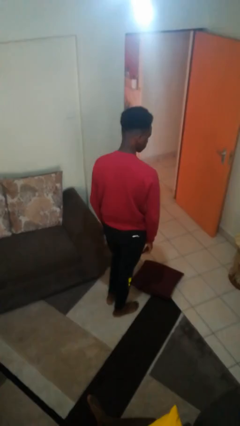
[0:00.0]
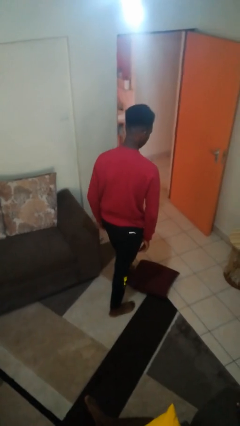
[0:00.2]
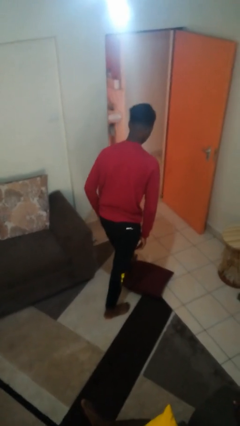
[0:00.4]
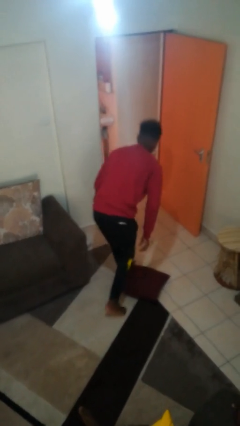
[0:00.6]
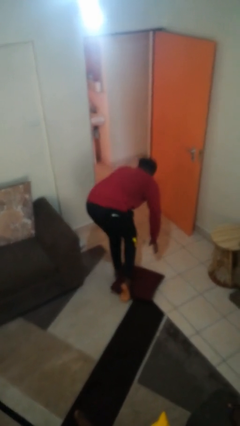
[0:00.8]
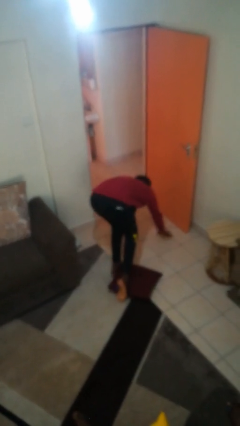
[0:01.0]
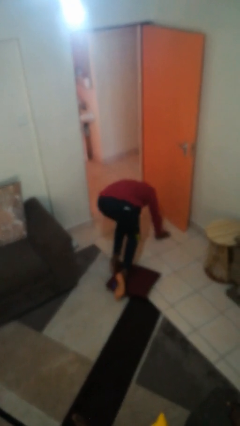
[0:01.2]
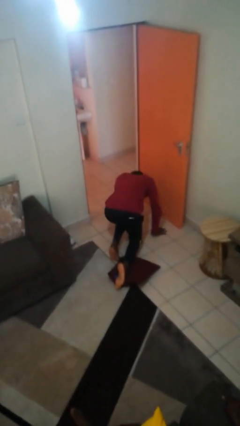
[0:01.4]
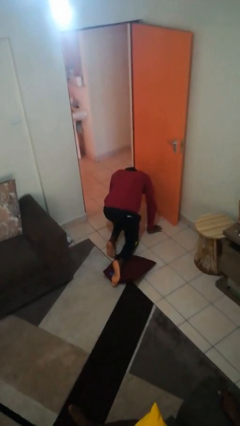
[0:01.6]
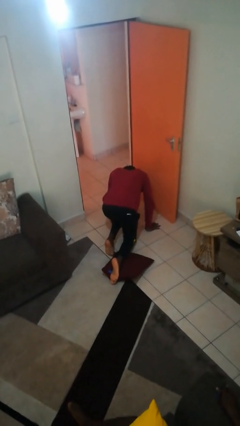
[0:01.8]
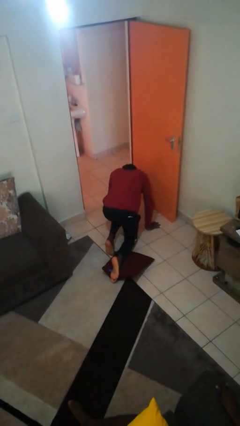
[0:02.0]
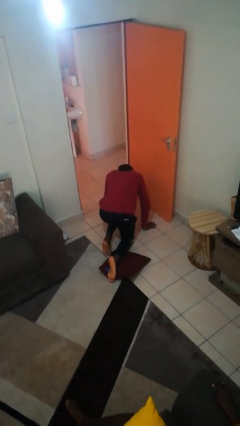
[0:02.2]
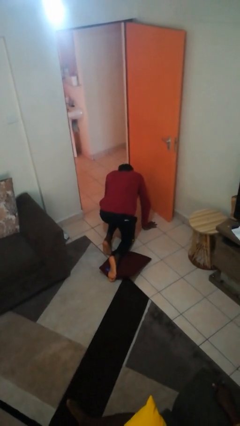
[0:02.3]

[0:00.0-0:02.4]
person trips on object on floor

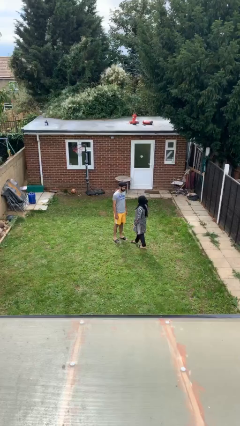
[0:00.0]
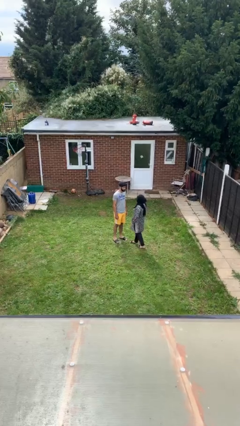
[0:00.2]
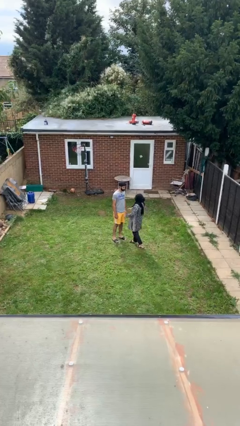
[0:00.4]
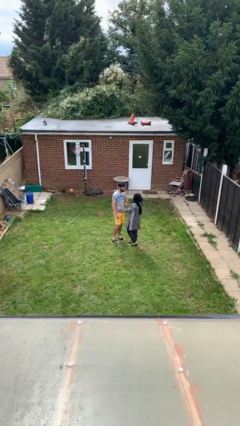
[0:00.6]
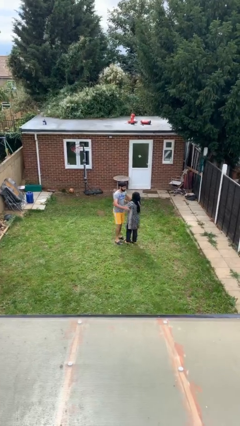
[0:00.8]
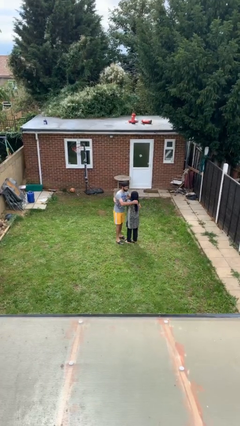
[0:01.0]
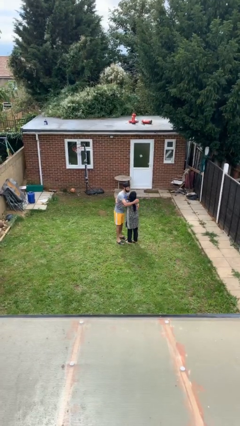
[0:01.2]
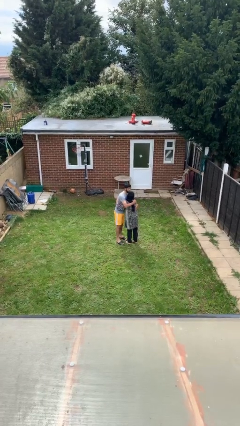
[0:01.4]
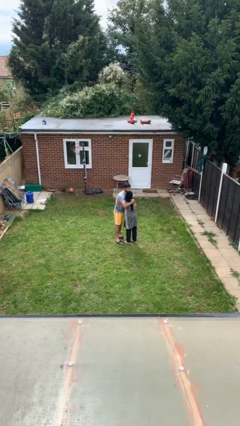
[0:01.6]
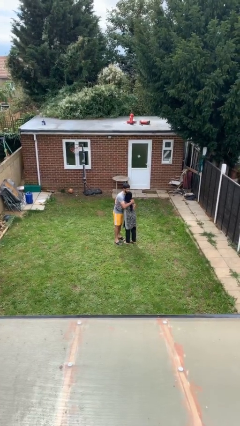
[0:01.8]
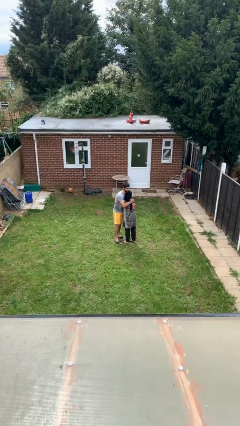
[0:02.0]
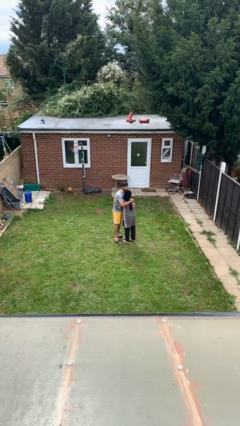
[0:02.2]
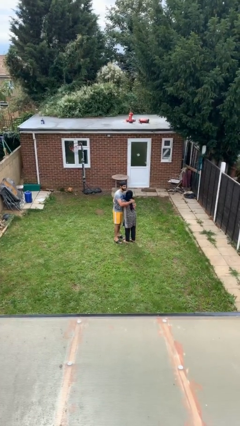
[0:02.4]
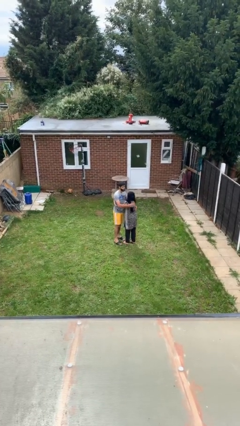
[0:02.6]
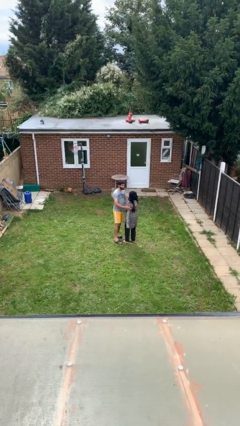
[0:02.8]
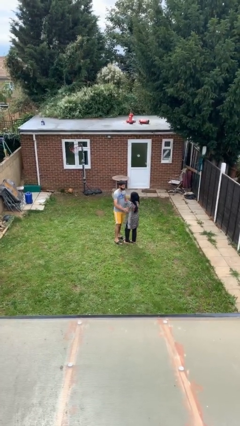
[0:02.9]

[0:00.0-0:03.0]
person embraces person

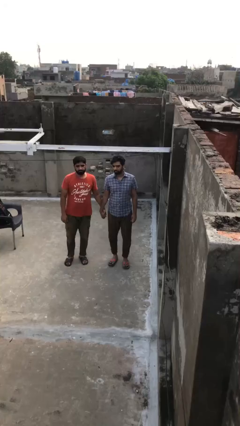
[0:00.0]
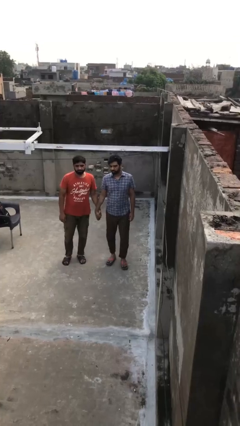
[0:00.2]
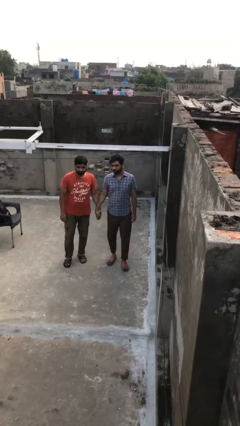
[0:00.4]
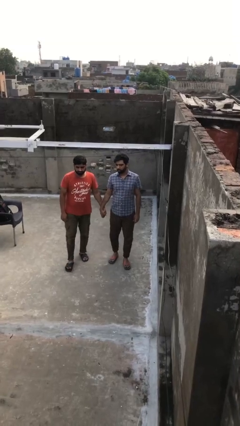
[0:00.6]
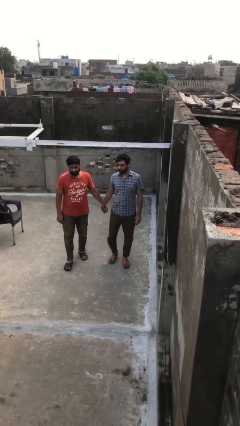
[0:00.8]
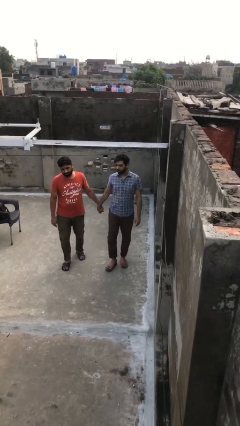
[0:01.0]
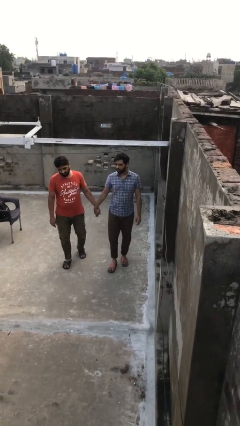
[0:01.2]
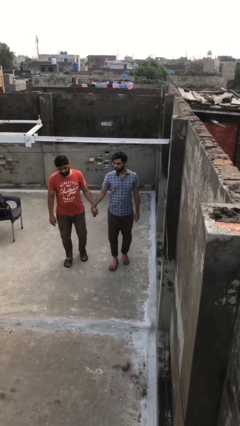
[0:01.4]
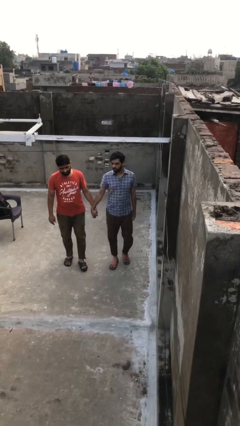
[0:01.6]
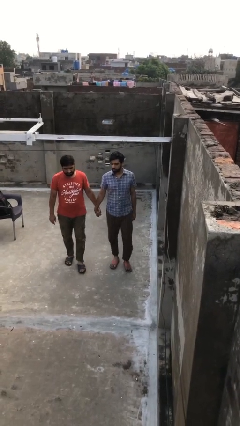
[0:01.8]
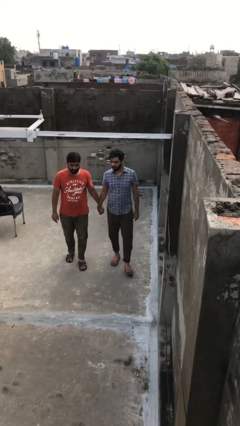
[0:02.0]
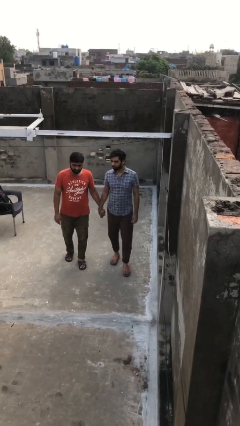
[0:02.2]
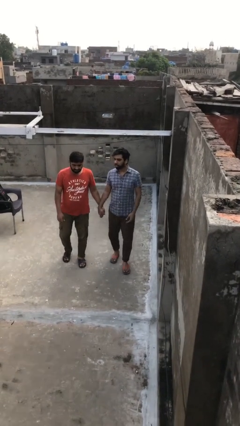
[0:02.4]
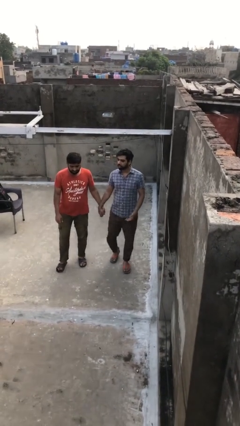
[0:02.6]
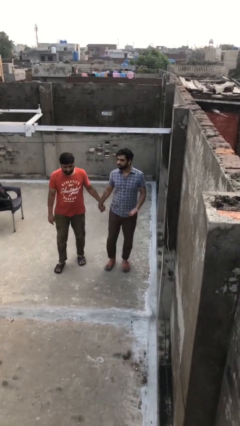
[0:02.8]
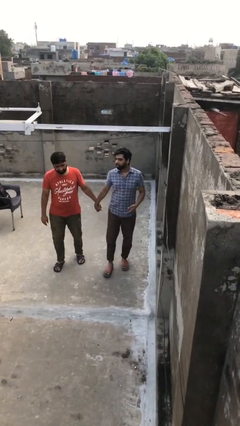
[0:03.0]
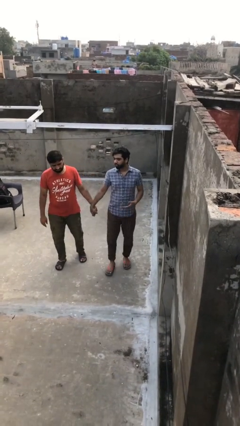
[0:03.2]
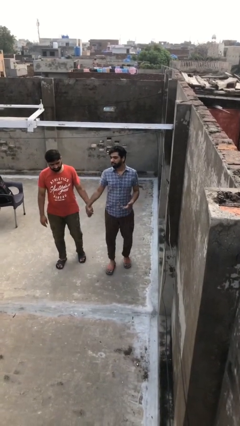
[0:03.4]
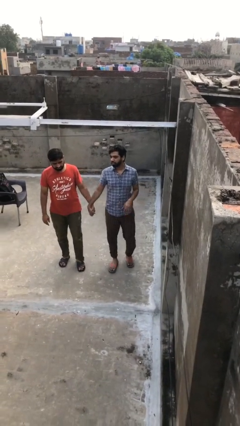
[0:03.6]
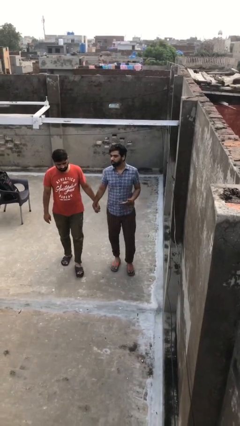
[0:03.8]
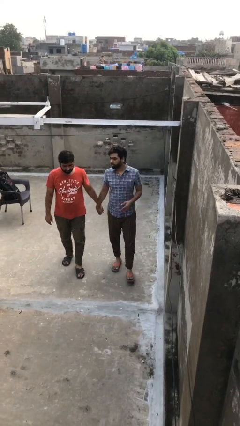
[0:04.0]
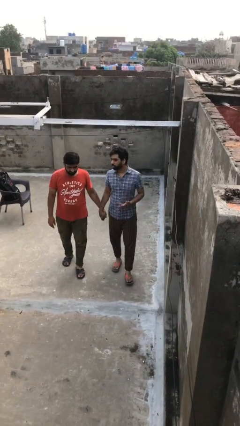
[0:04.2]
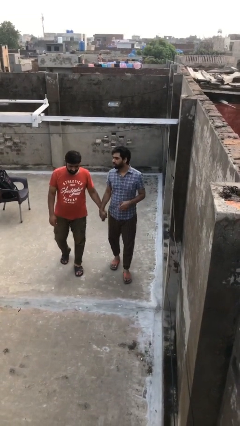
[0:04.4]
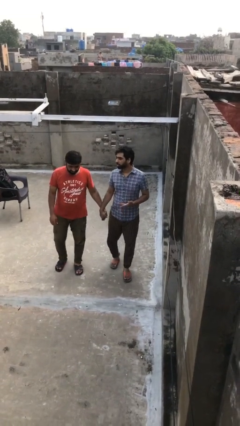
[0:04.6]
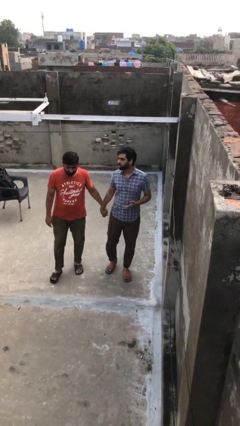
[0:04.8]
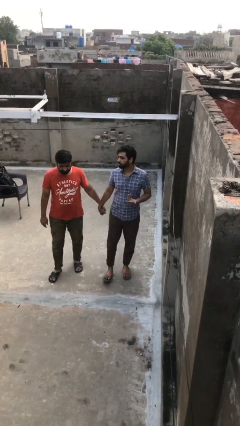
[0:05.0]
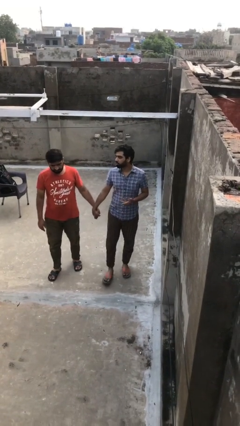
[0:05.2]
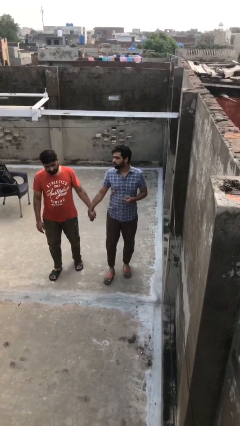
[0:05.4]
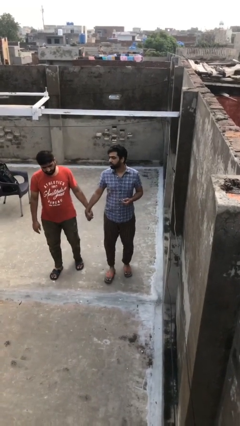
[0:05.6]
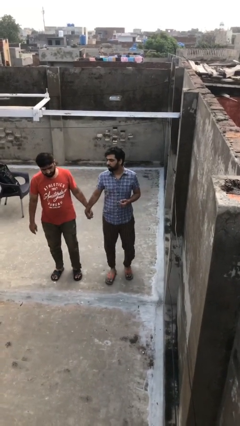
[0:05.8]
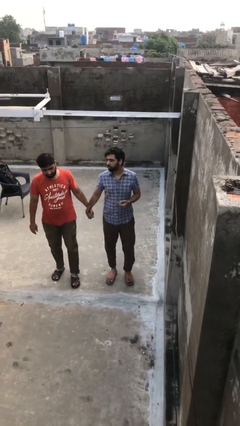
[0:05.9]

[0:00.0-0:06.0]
person holds hand

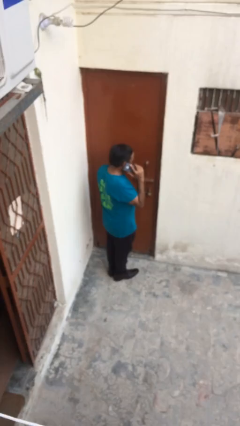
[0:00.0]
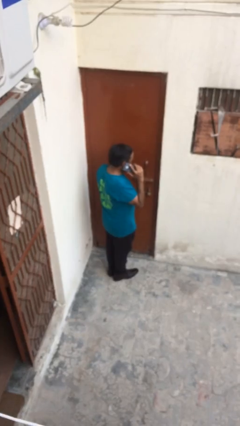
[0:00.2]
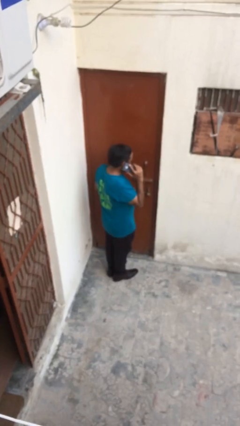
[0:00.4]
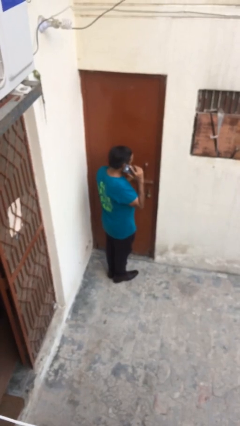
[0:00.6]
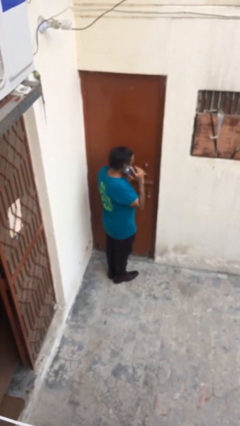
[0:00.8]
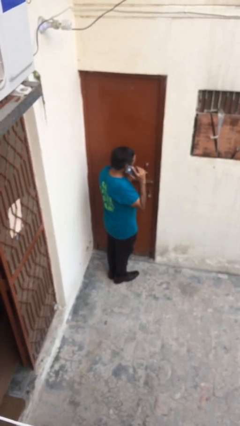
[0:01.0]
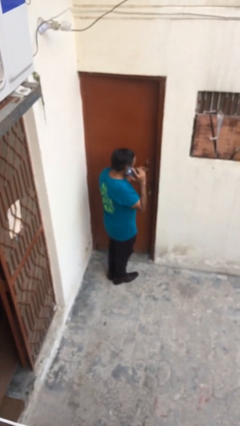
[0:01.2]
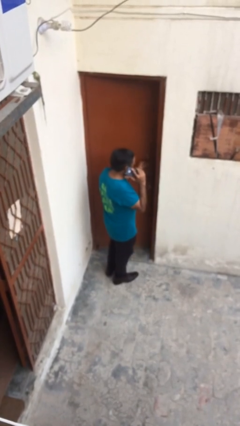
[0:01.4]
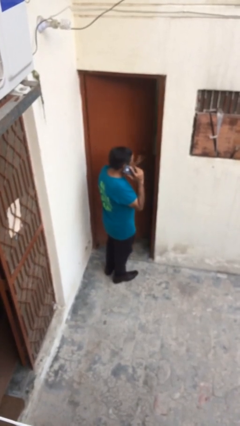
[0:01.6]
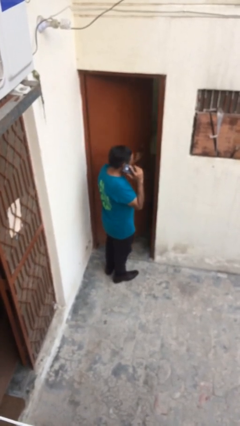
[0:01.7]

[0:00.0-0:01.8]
person opens facility door

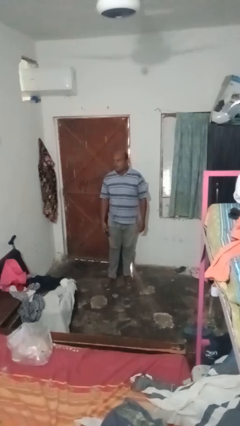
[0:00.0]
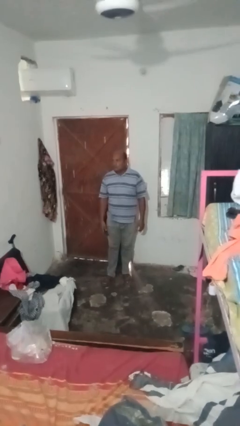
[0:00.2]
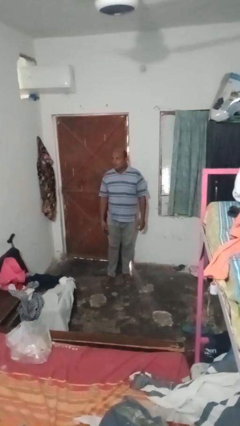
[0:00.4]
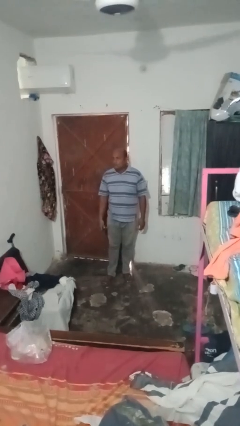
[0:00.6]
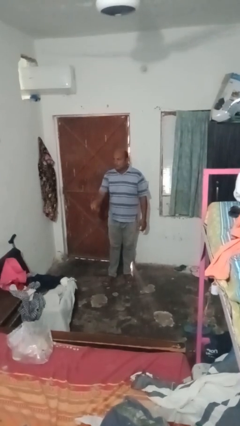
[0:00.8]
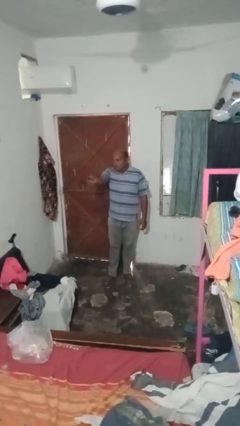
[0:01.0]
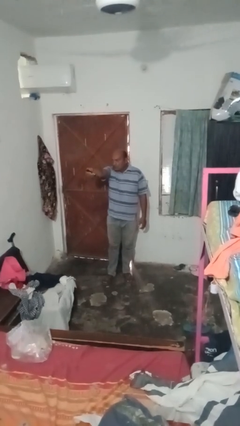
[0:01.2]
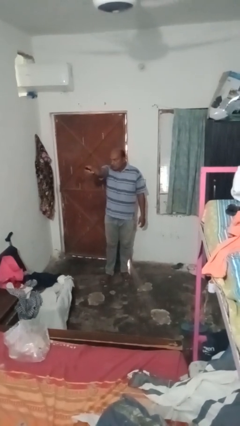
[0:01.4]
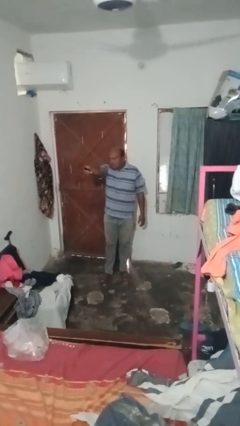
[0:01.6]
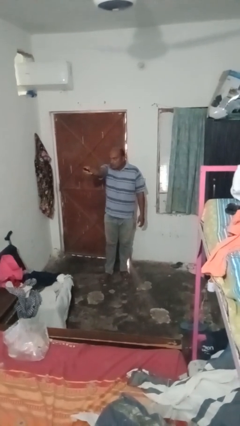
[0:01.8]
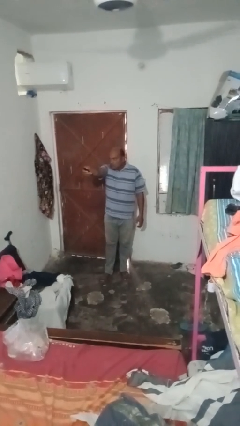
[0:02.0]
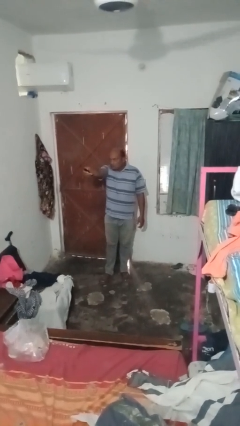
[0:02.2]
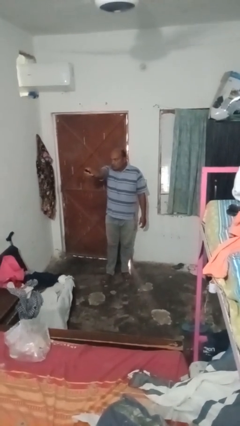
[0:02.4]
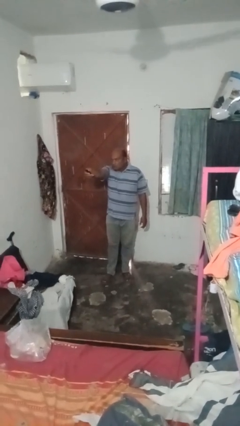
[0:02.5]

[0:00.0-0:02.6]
person uses television remote

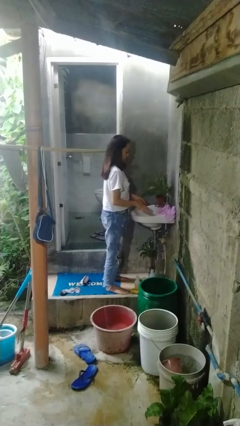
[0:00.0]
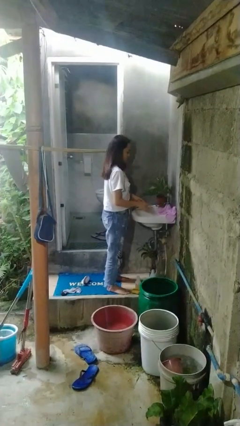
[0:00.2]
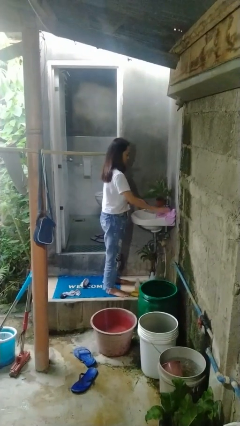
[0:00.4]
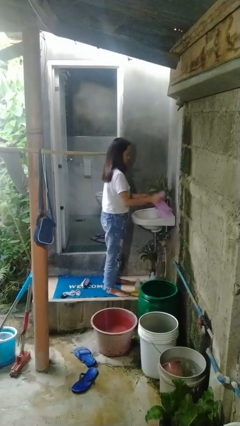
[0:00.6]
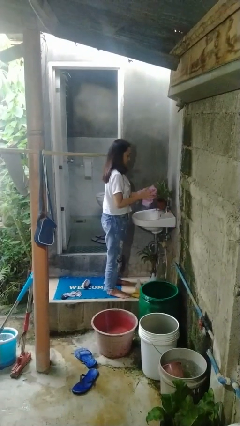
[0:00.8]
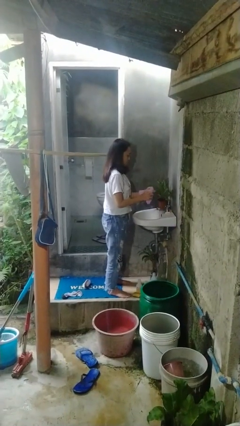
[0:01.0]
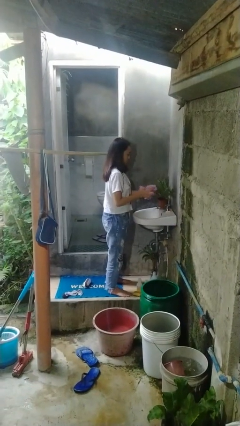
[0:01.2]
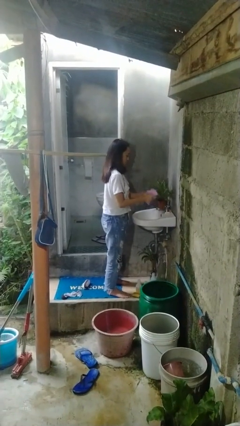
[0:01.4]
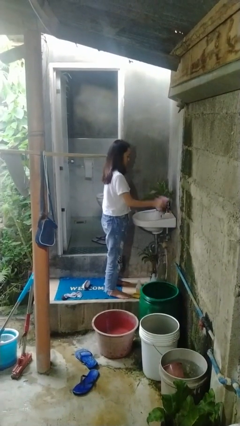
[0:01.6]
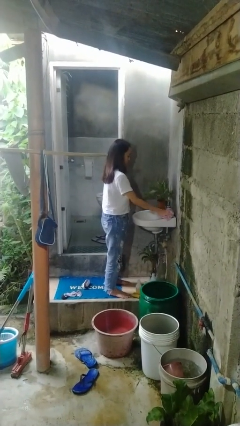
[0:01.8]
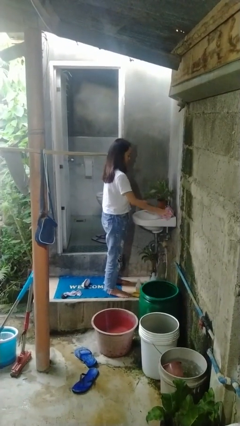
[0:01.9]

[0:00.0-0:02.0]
person dries hands with towel
